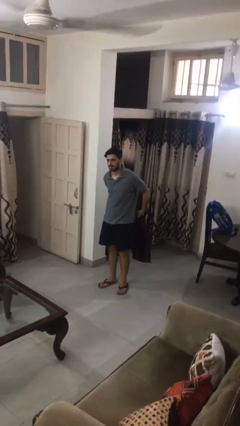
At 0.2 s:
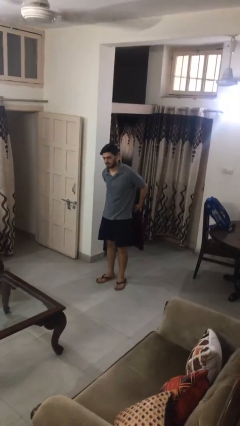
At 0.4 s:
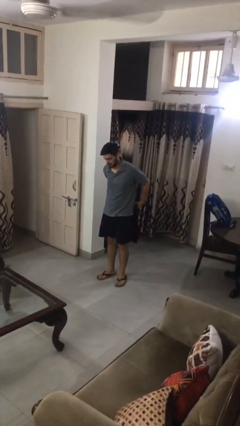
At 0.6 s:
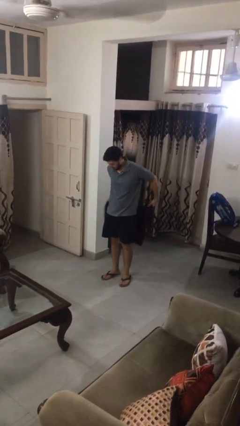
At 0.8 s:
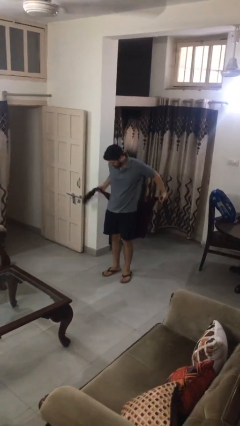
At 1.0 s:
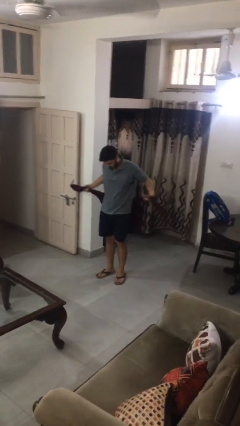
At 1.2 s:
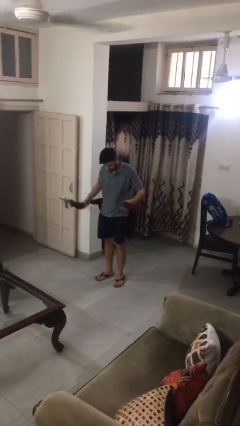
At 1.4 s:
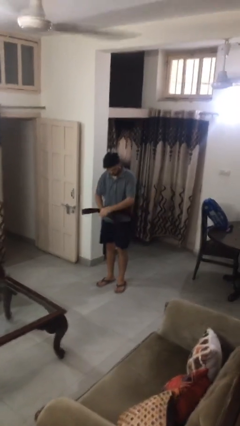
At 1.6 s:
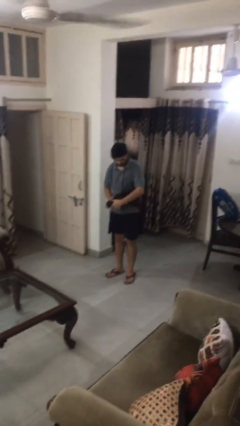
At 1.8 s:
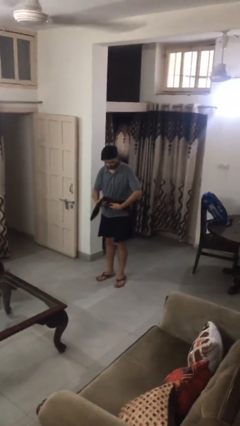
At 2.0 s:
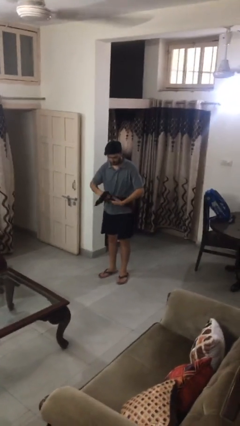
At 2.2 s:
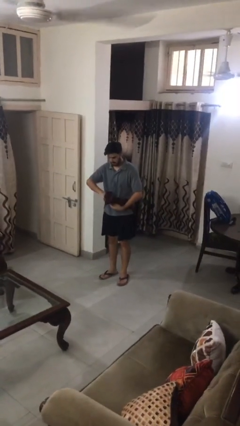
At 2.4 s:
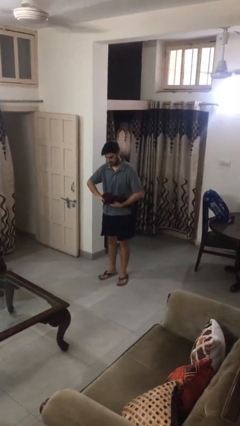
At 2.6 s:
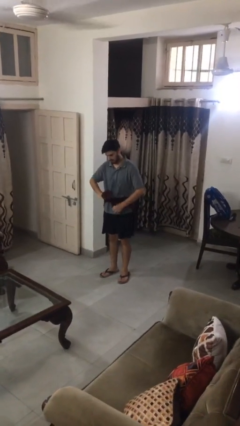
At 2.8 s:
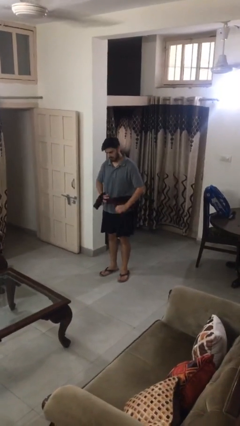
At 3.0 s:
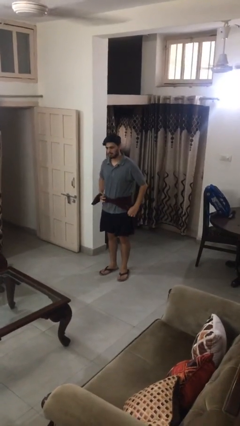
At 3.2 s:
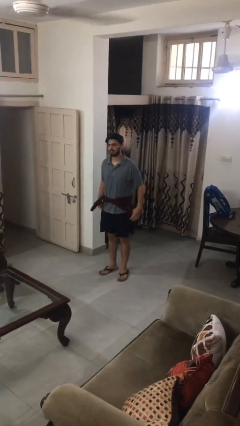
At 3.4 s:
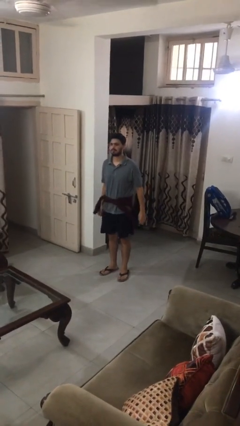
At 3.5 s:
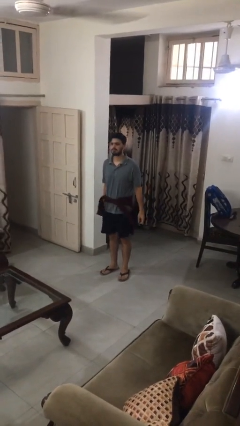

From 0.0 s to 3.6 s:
person ties jacket around waist

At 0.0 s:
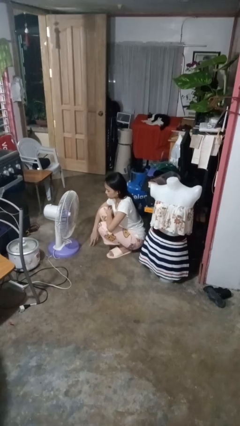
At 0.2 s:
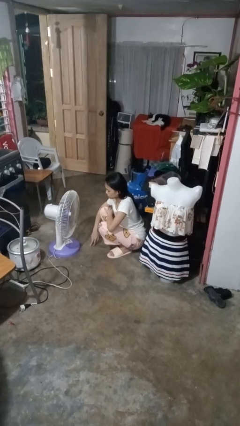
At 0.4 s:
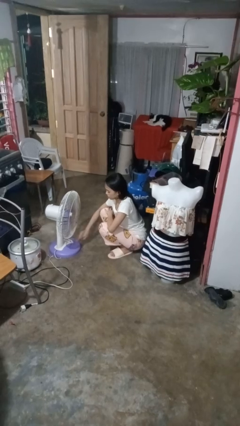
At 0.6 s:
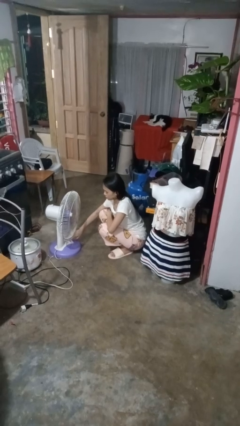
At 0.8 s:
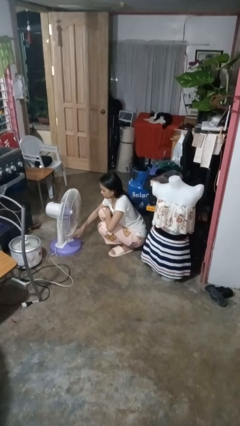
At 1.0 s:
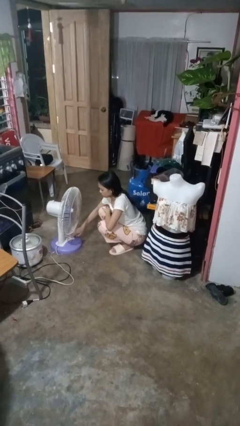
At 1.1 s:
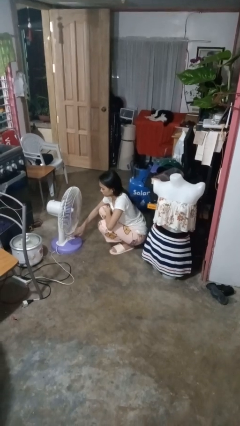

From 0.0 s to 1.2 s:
person turns off fan

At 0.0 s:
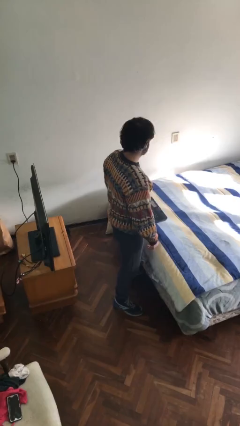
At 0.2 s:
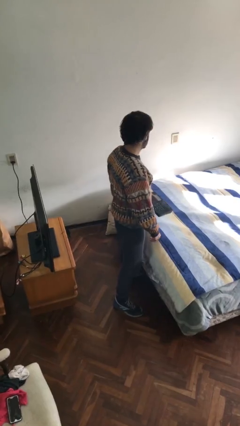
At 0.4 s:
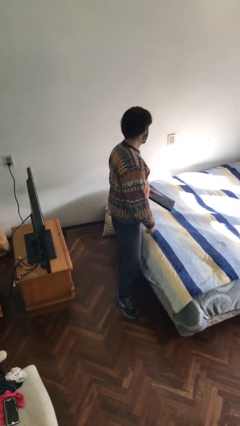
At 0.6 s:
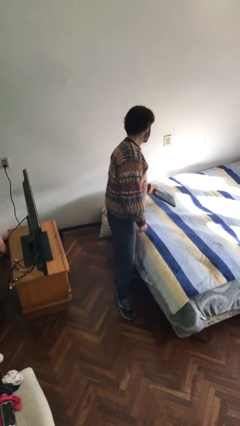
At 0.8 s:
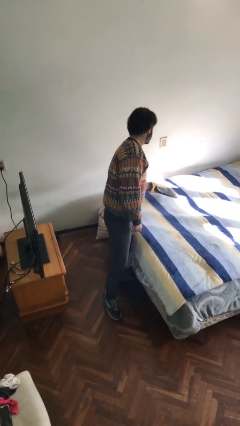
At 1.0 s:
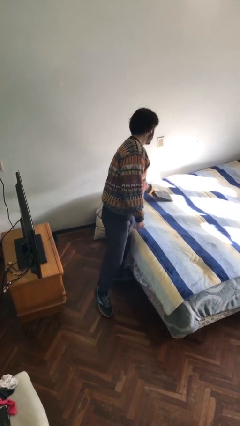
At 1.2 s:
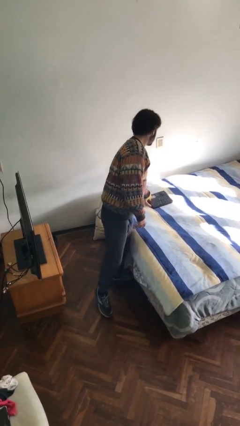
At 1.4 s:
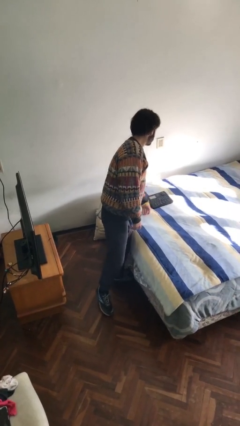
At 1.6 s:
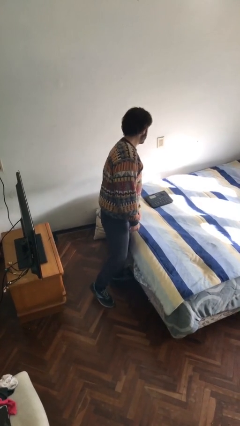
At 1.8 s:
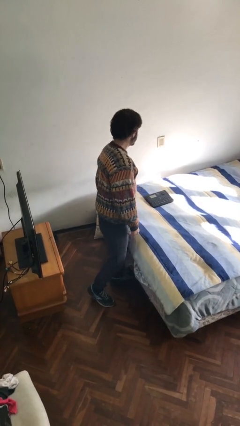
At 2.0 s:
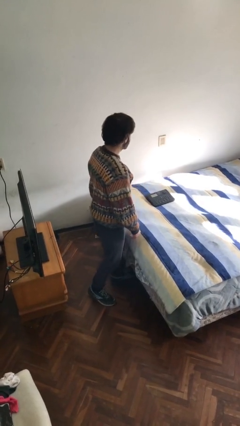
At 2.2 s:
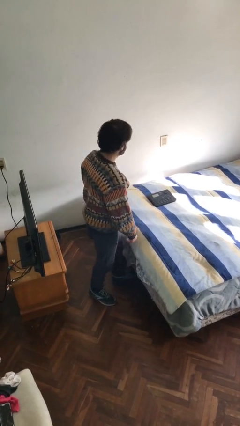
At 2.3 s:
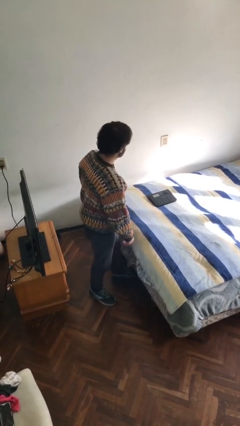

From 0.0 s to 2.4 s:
person puts down object on bed

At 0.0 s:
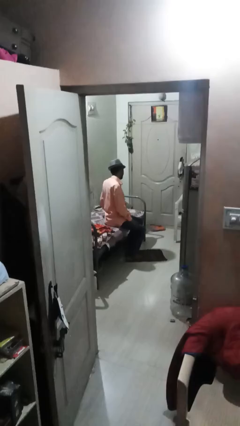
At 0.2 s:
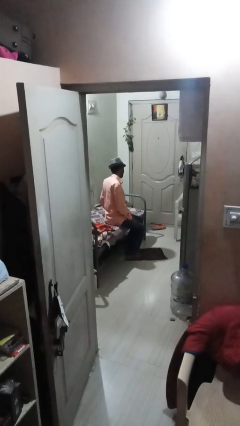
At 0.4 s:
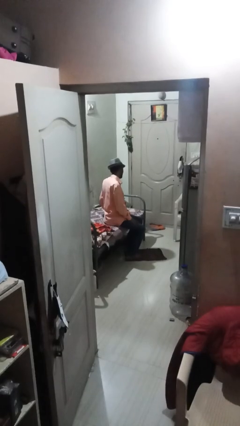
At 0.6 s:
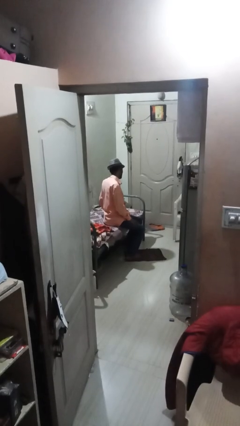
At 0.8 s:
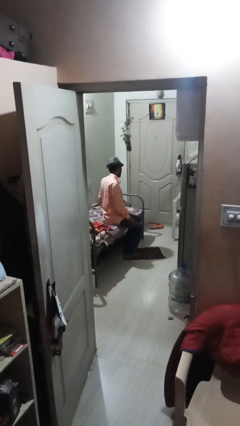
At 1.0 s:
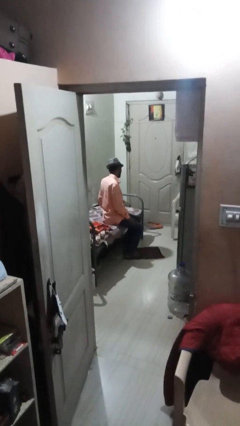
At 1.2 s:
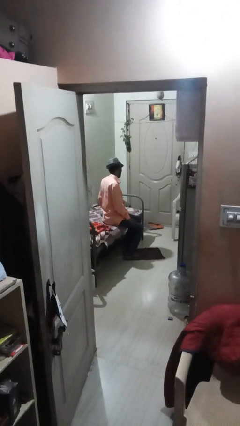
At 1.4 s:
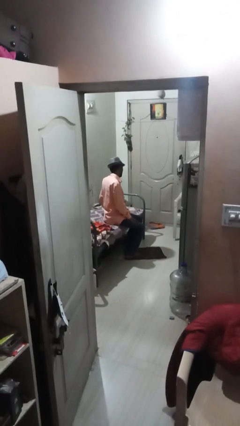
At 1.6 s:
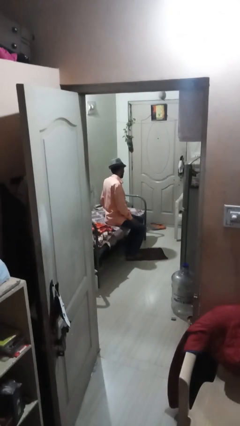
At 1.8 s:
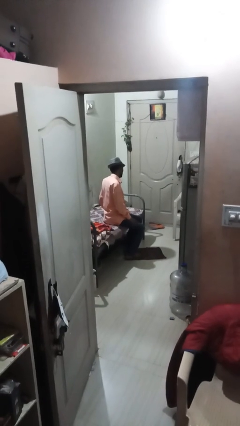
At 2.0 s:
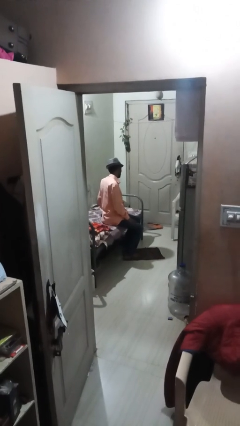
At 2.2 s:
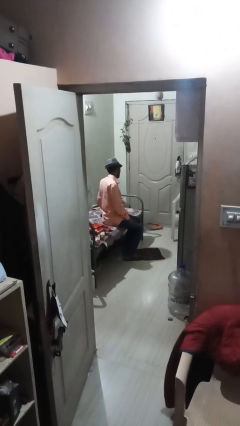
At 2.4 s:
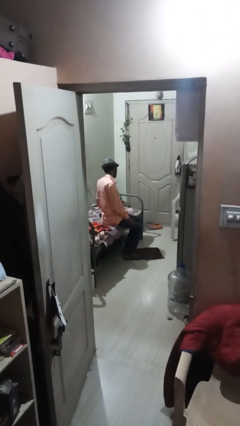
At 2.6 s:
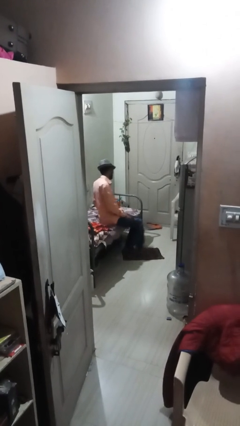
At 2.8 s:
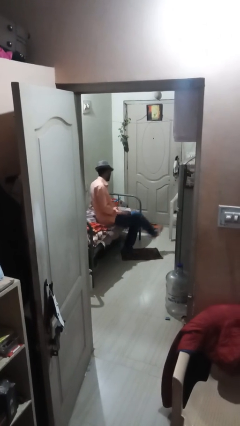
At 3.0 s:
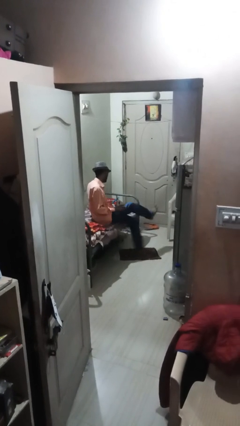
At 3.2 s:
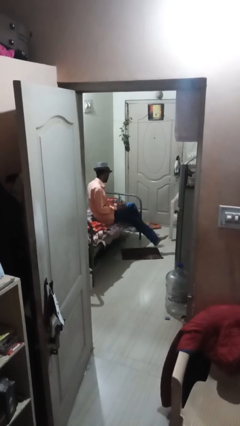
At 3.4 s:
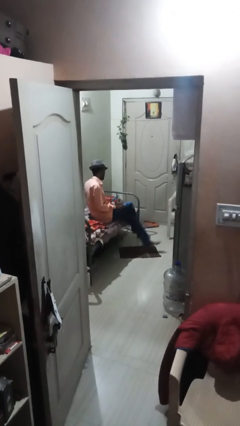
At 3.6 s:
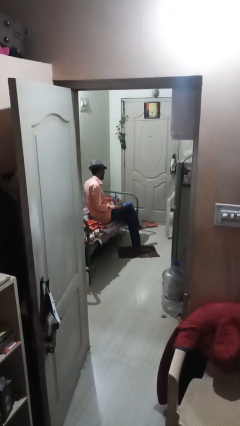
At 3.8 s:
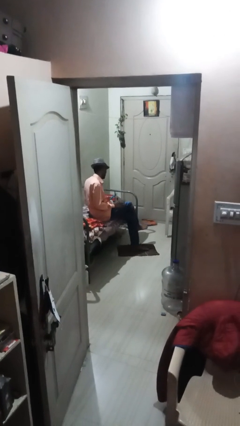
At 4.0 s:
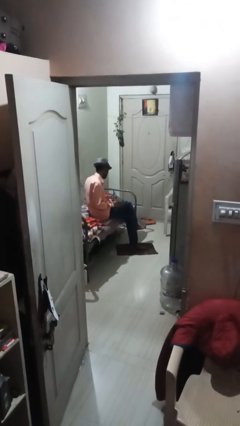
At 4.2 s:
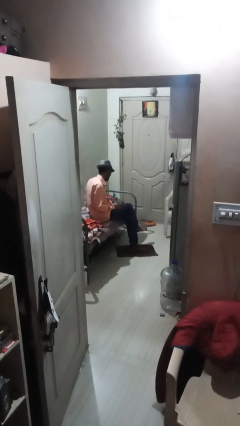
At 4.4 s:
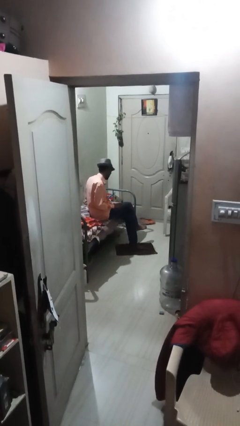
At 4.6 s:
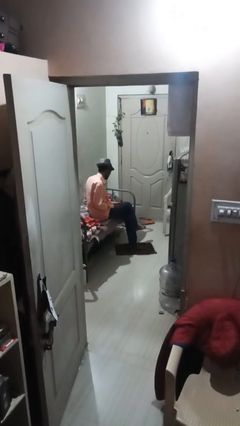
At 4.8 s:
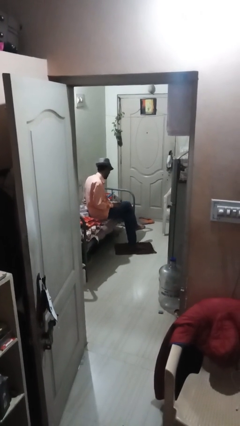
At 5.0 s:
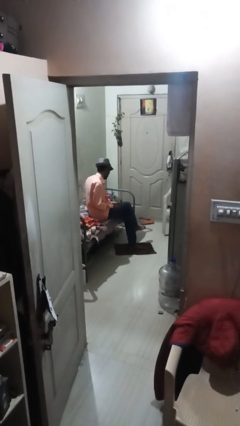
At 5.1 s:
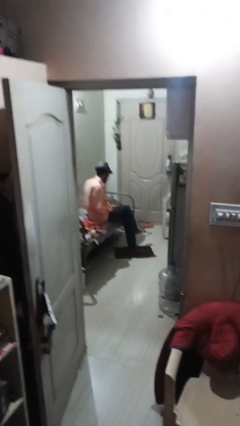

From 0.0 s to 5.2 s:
person crosses legs

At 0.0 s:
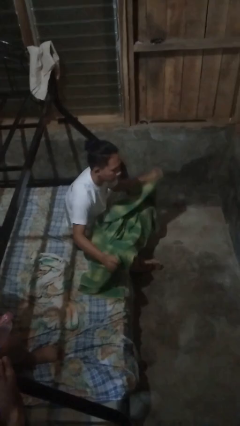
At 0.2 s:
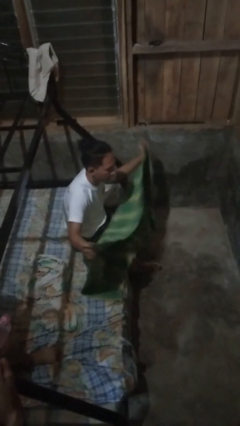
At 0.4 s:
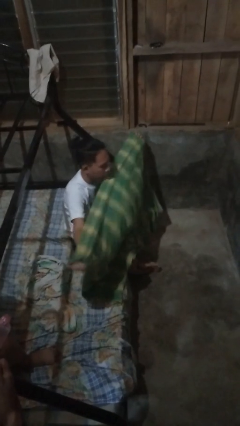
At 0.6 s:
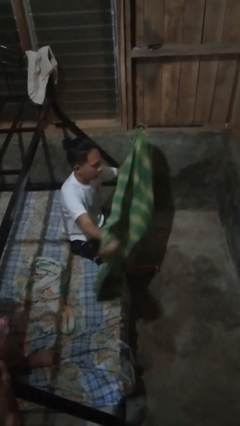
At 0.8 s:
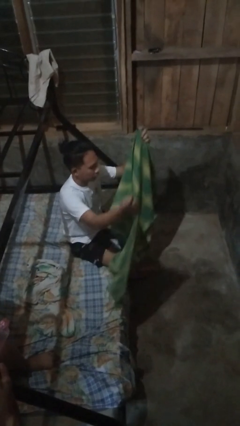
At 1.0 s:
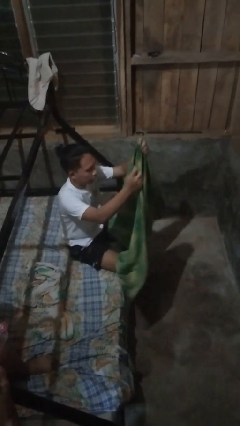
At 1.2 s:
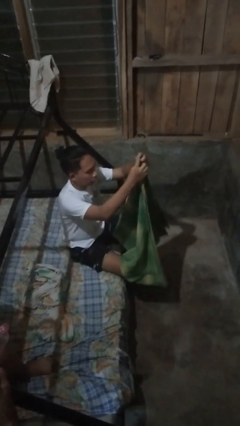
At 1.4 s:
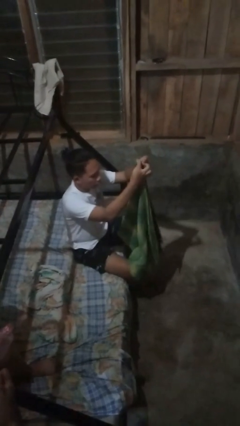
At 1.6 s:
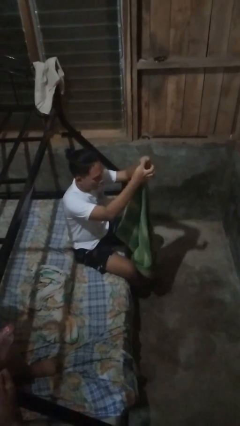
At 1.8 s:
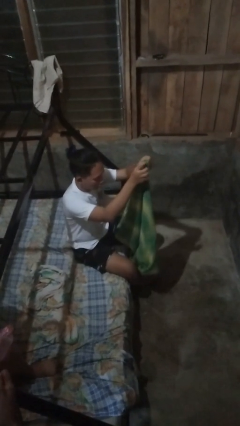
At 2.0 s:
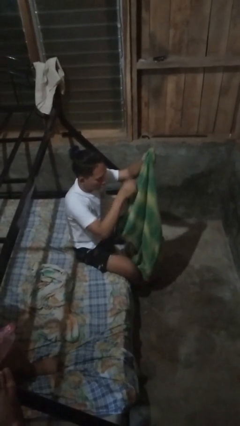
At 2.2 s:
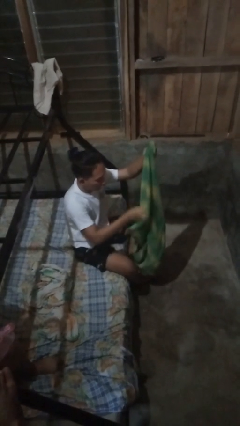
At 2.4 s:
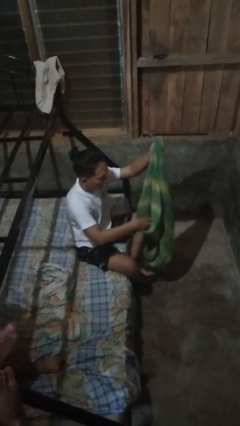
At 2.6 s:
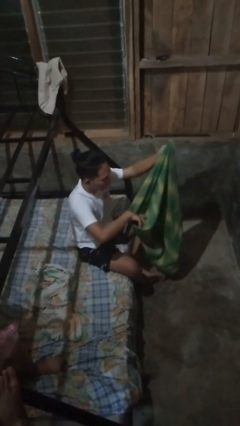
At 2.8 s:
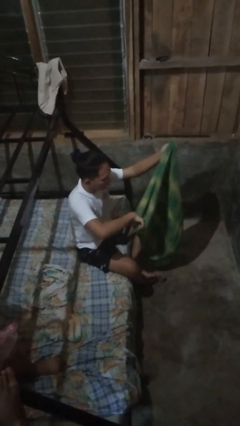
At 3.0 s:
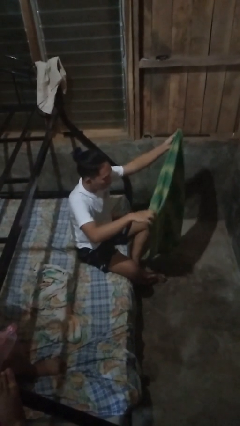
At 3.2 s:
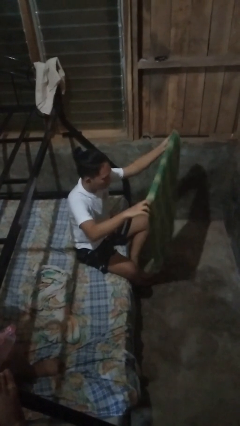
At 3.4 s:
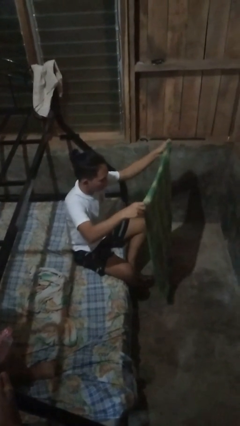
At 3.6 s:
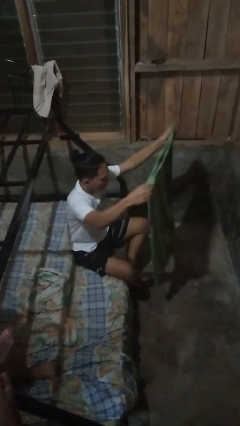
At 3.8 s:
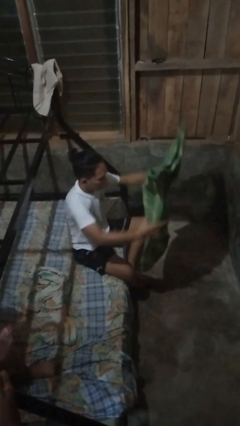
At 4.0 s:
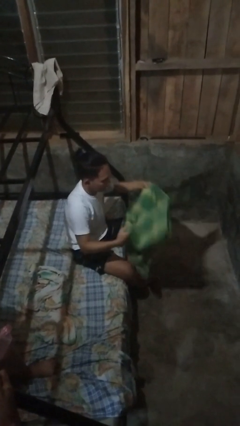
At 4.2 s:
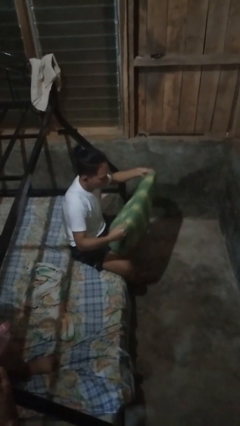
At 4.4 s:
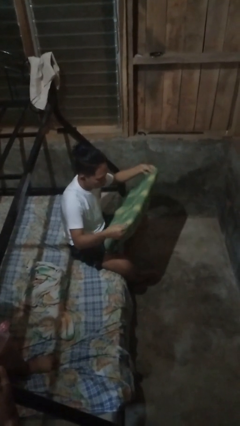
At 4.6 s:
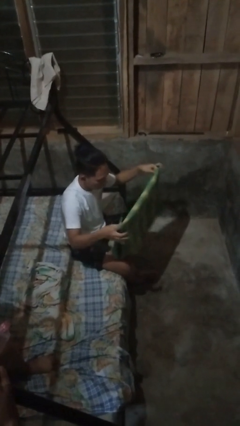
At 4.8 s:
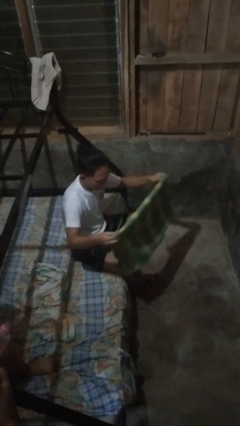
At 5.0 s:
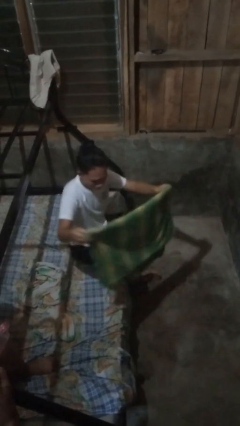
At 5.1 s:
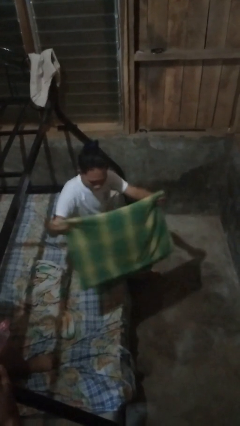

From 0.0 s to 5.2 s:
person folds blanket

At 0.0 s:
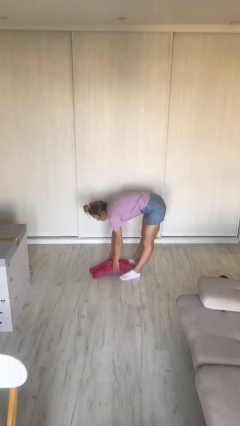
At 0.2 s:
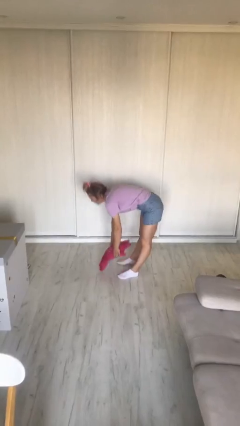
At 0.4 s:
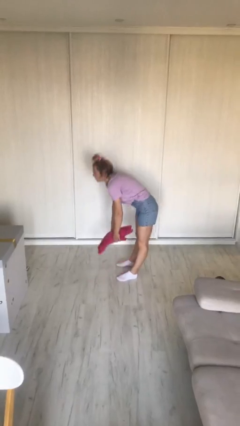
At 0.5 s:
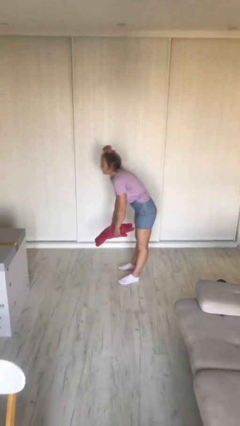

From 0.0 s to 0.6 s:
person picks up object from floor
